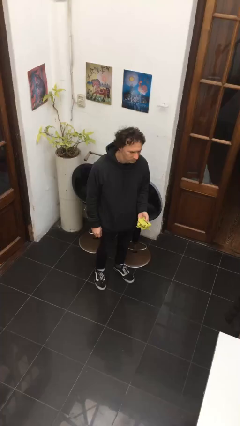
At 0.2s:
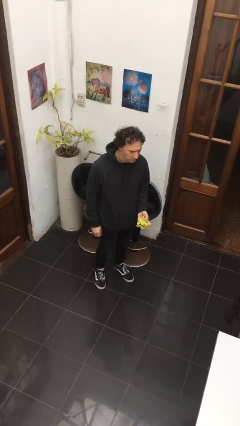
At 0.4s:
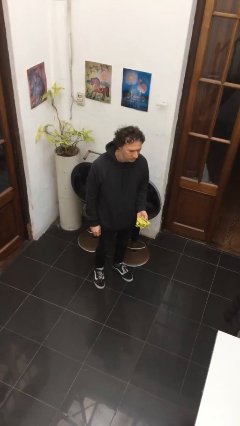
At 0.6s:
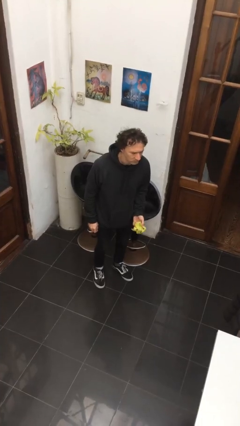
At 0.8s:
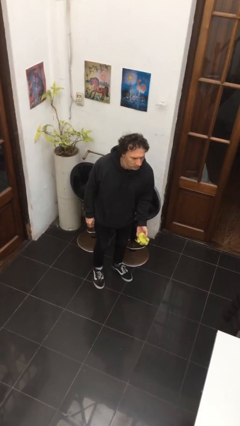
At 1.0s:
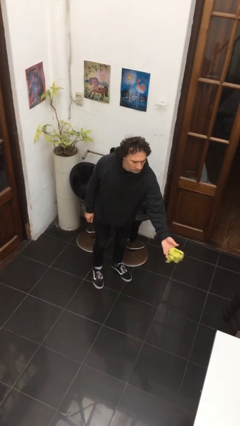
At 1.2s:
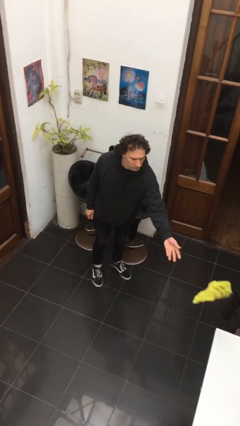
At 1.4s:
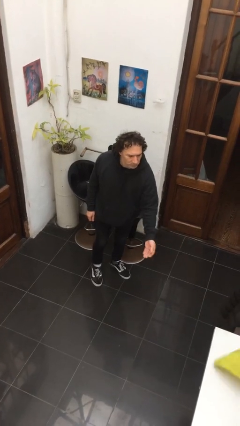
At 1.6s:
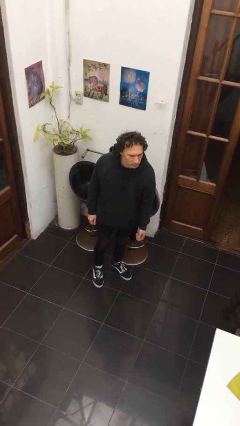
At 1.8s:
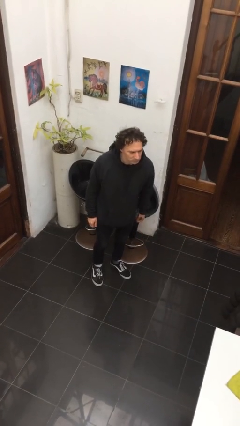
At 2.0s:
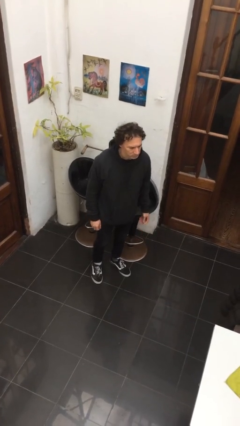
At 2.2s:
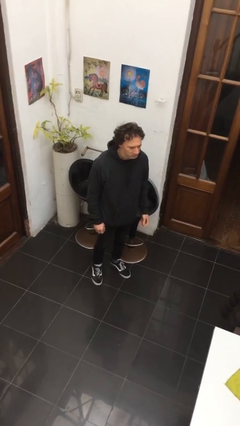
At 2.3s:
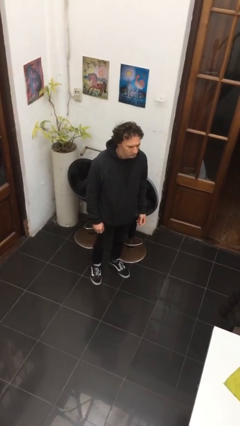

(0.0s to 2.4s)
person throws object on table

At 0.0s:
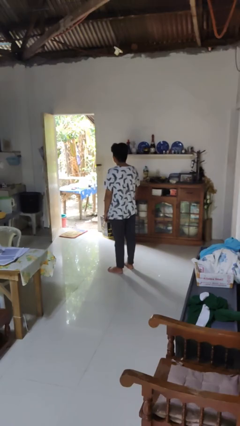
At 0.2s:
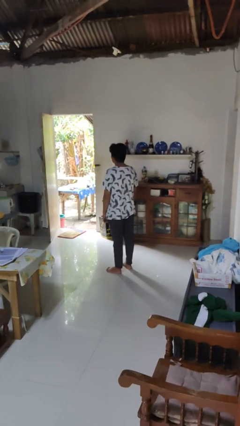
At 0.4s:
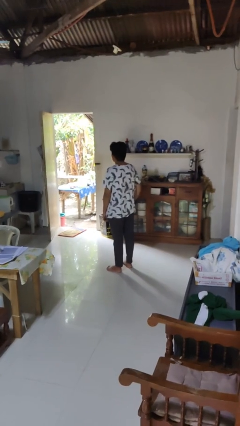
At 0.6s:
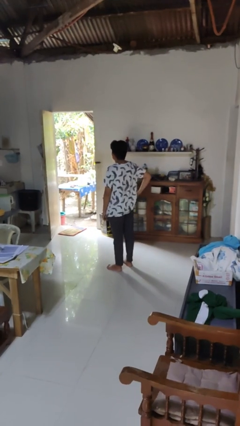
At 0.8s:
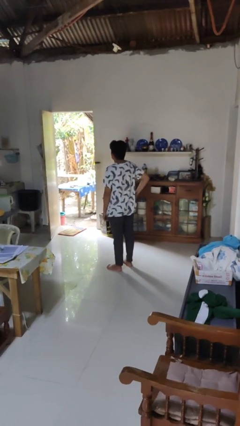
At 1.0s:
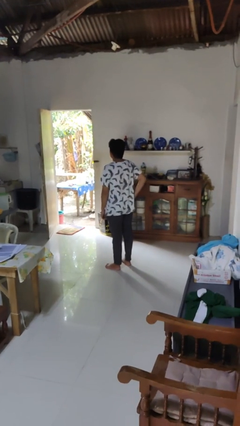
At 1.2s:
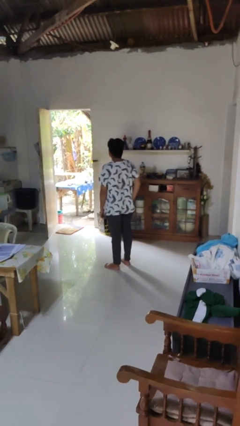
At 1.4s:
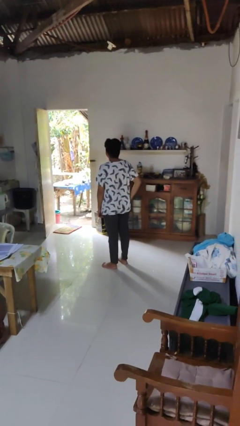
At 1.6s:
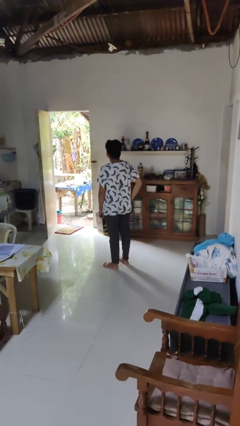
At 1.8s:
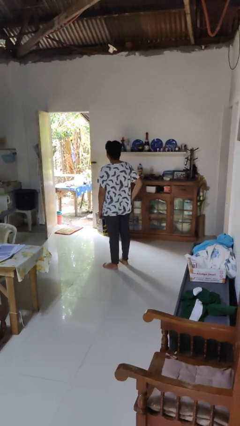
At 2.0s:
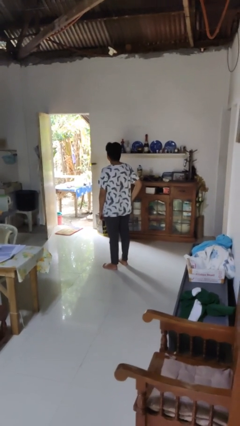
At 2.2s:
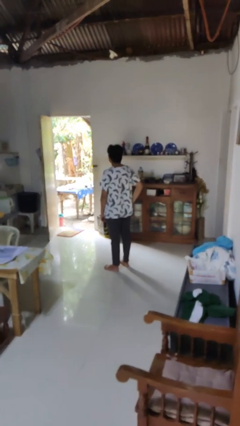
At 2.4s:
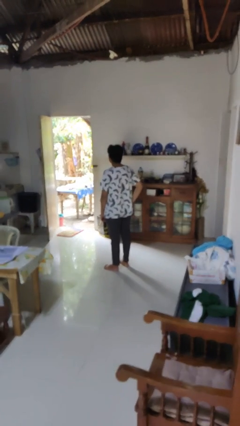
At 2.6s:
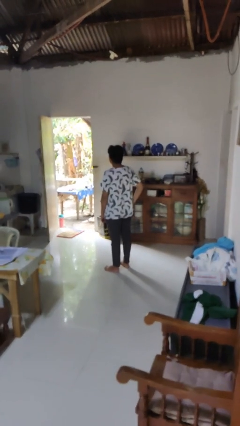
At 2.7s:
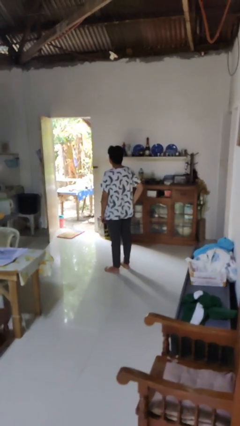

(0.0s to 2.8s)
person puts hands in back pockets

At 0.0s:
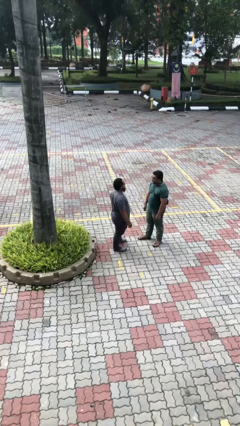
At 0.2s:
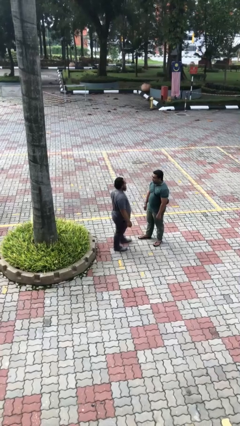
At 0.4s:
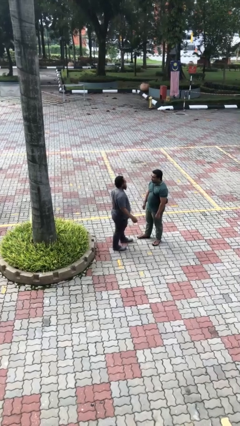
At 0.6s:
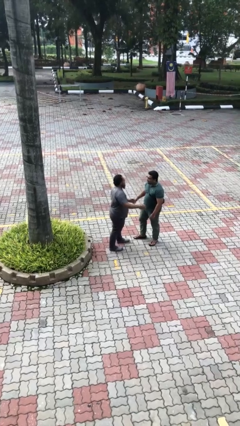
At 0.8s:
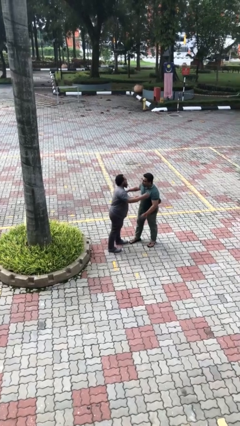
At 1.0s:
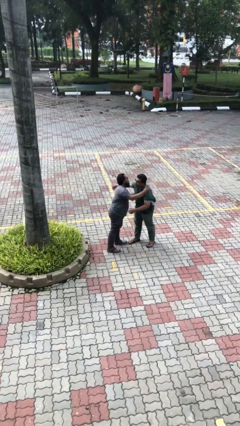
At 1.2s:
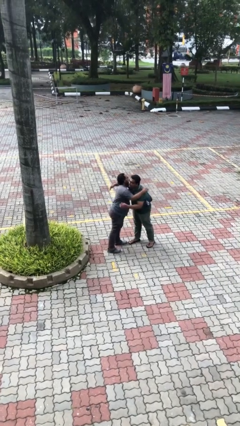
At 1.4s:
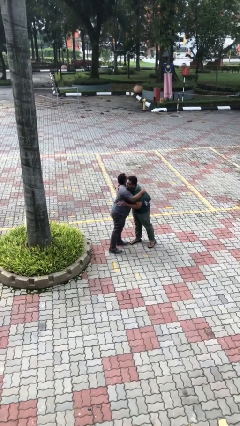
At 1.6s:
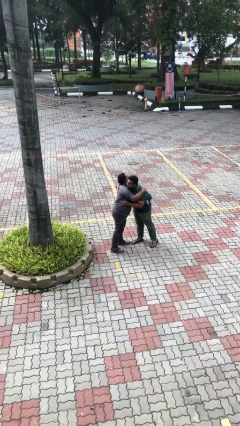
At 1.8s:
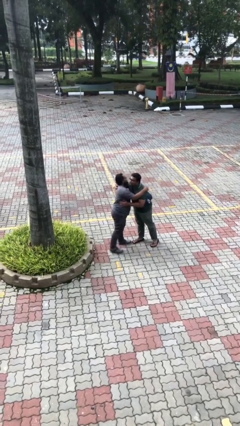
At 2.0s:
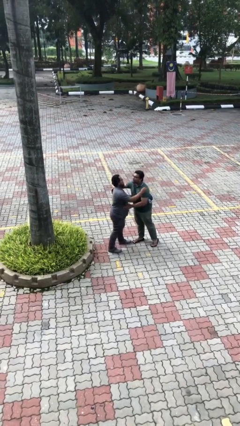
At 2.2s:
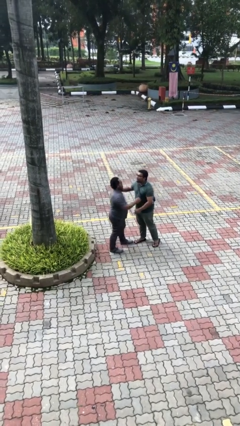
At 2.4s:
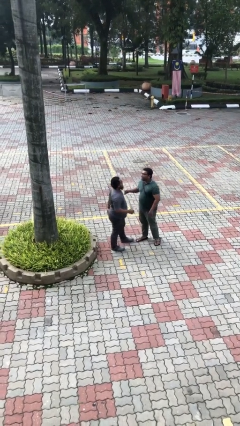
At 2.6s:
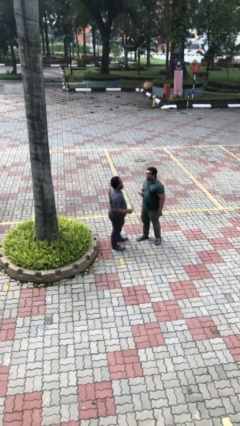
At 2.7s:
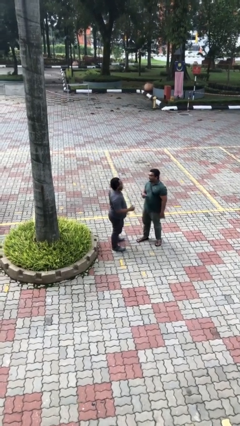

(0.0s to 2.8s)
person embraces person

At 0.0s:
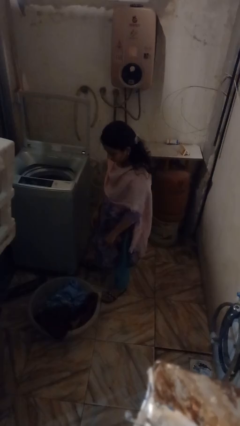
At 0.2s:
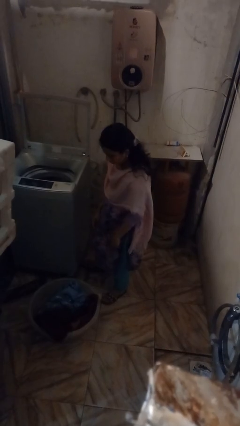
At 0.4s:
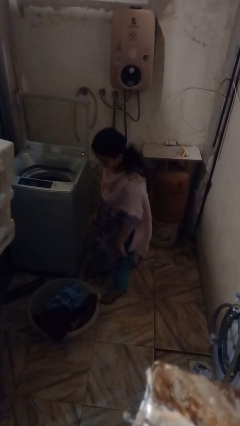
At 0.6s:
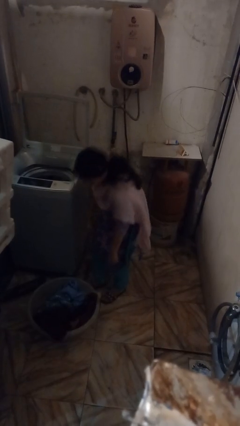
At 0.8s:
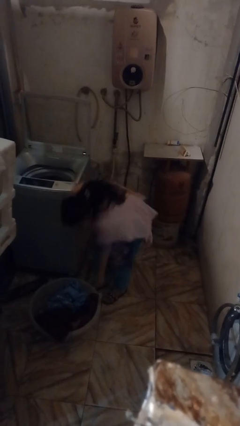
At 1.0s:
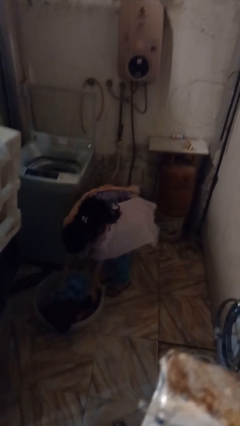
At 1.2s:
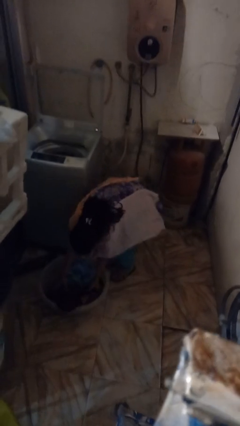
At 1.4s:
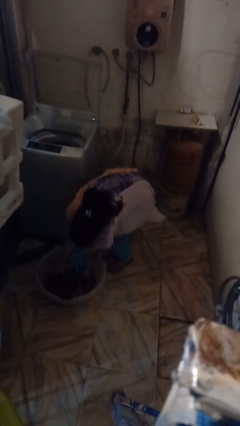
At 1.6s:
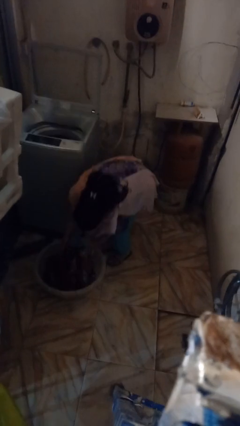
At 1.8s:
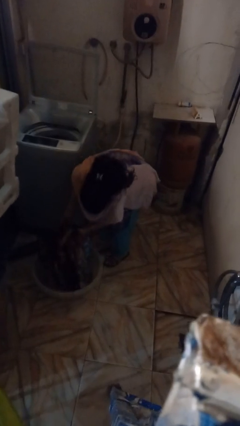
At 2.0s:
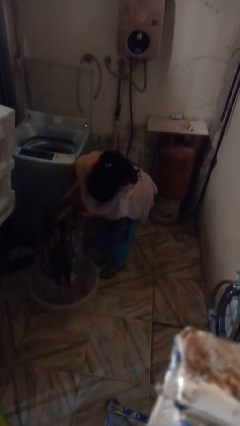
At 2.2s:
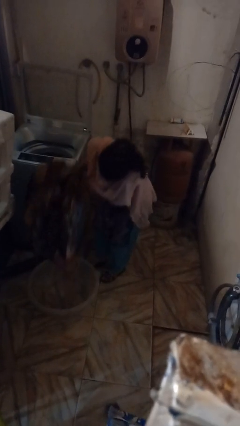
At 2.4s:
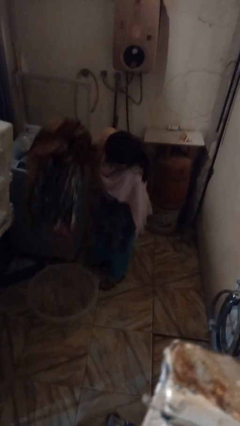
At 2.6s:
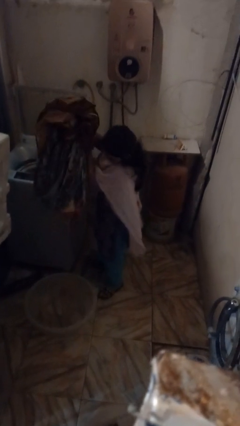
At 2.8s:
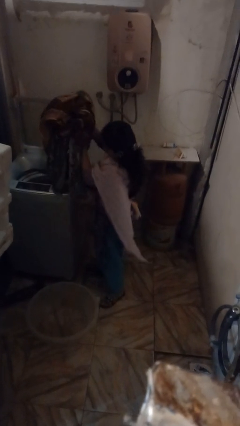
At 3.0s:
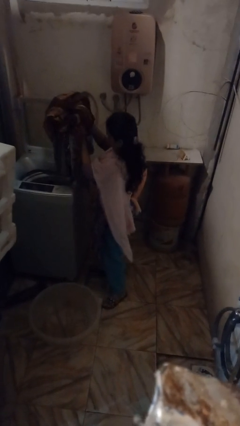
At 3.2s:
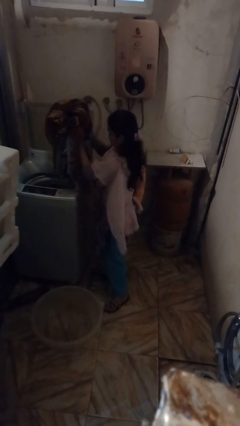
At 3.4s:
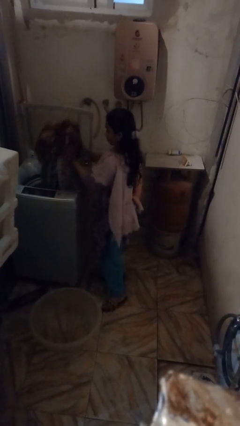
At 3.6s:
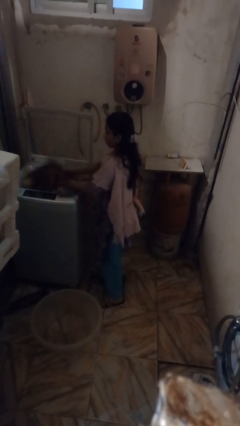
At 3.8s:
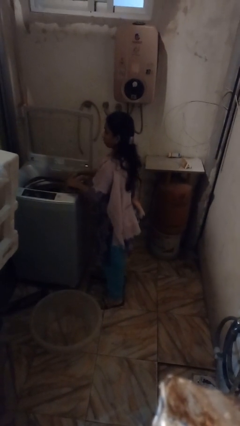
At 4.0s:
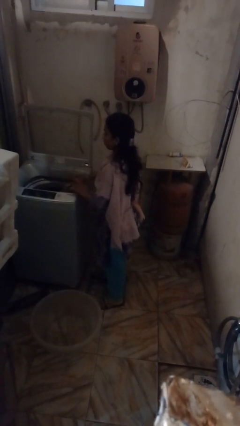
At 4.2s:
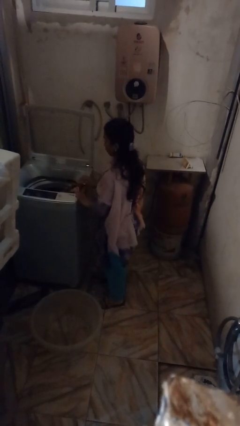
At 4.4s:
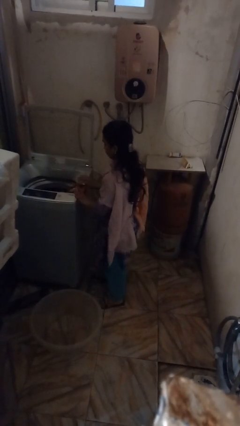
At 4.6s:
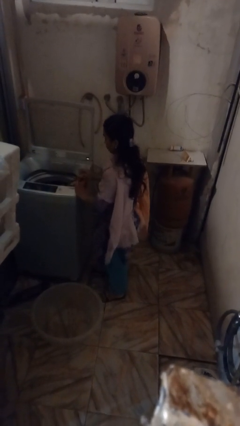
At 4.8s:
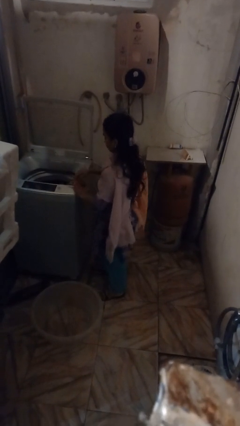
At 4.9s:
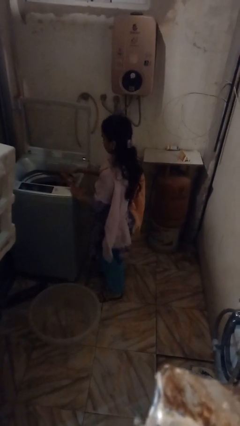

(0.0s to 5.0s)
person loads clotheswasher

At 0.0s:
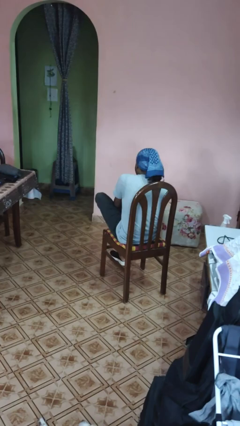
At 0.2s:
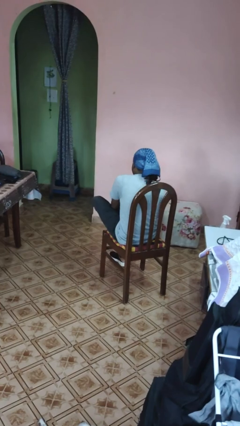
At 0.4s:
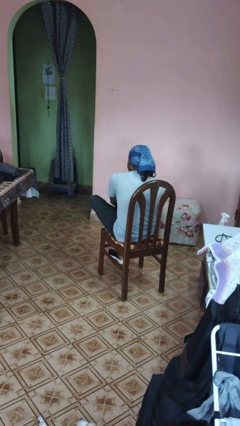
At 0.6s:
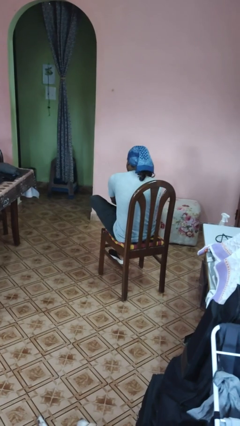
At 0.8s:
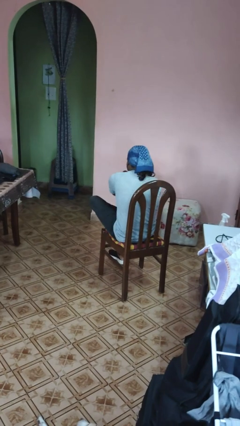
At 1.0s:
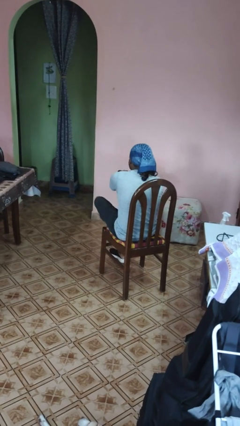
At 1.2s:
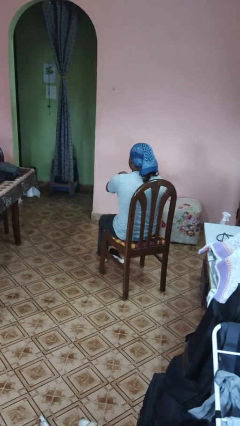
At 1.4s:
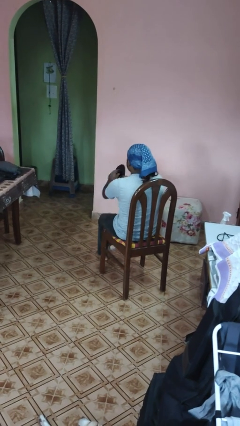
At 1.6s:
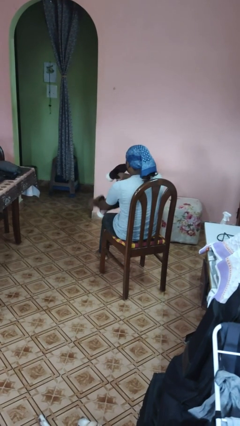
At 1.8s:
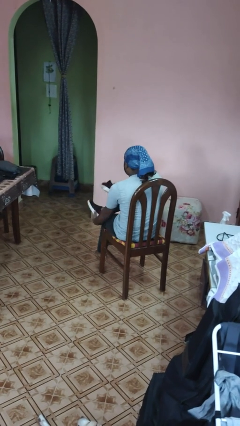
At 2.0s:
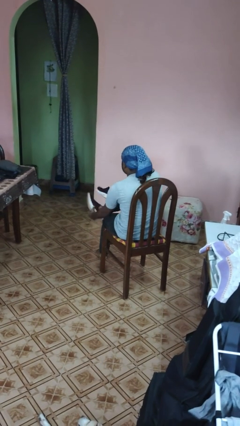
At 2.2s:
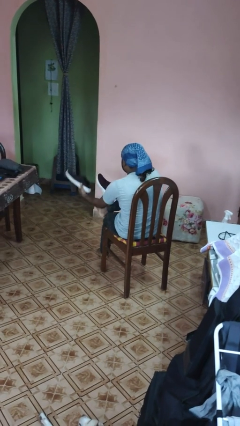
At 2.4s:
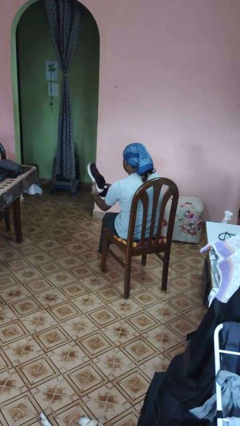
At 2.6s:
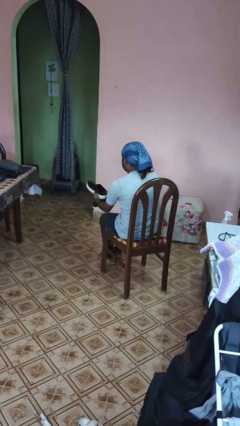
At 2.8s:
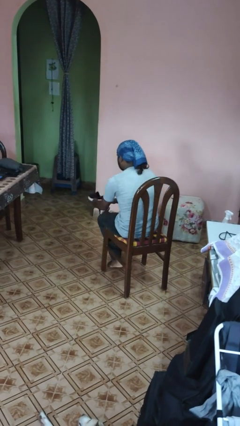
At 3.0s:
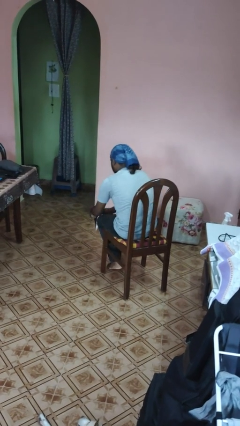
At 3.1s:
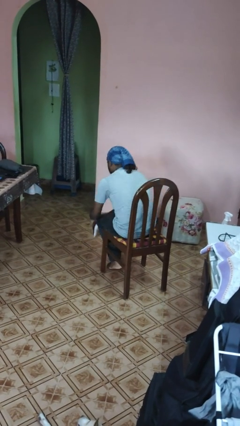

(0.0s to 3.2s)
person takes off shoes

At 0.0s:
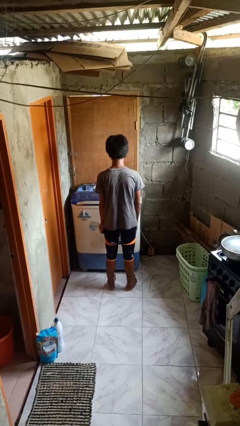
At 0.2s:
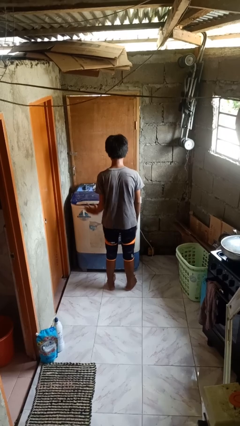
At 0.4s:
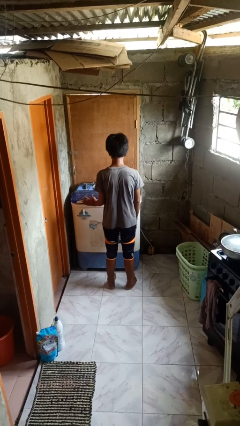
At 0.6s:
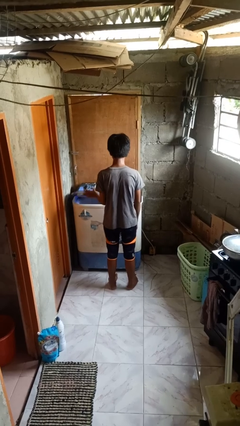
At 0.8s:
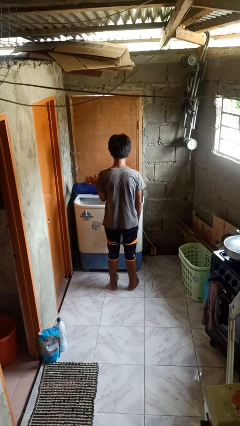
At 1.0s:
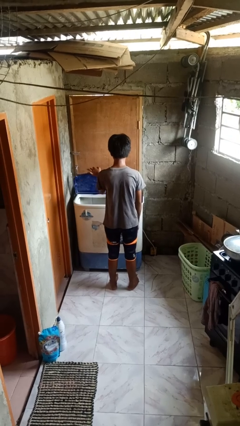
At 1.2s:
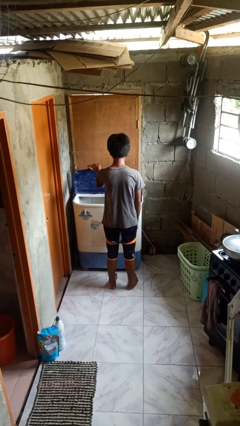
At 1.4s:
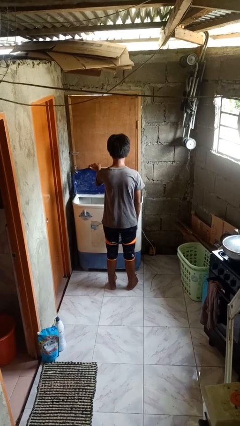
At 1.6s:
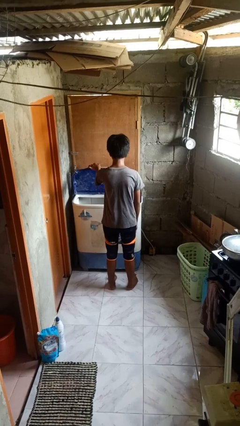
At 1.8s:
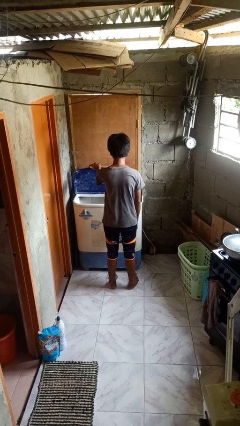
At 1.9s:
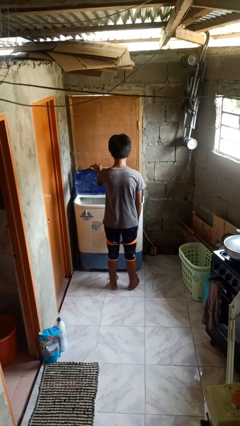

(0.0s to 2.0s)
person opens clothes washer
